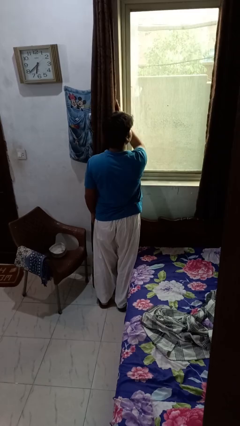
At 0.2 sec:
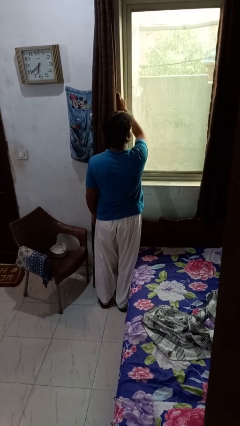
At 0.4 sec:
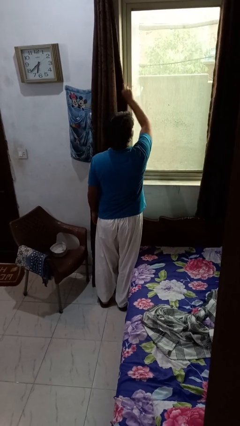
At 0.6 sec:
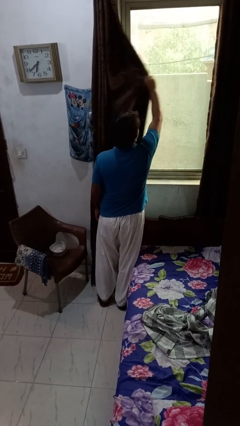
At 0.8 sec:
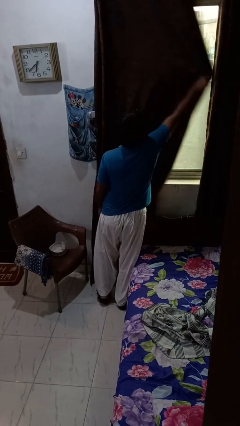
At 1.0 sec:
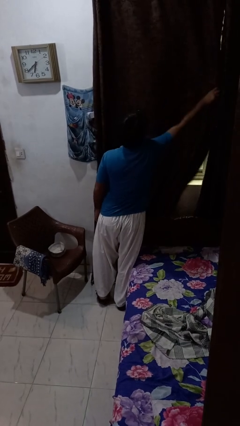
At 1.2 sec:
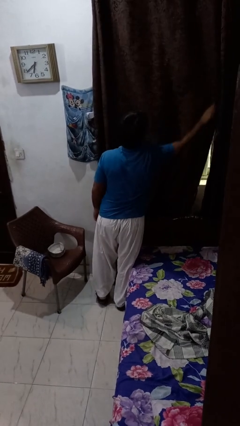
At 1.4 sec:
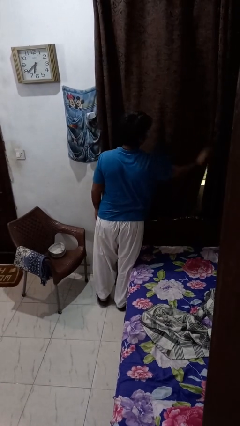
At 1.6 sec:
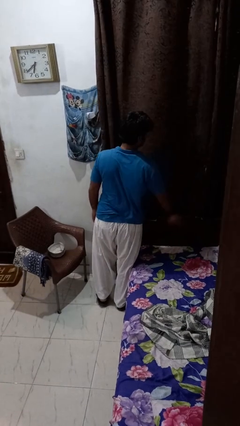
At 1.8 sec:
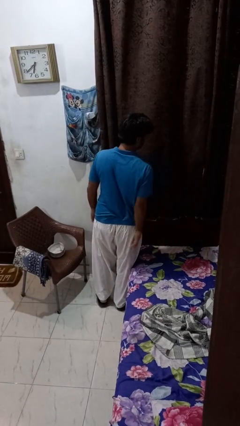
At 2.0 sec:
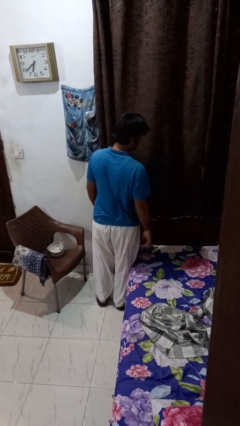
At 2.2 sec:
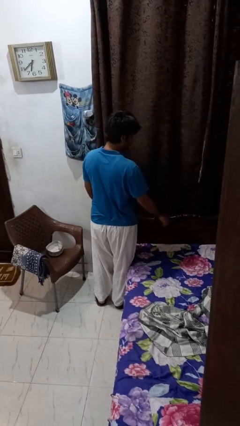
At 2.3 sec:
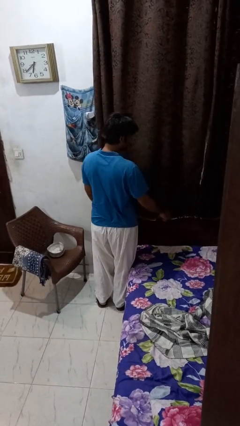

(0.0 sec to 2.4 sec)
person closes curtains

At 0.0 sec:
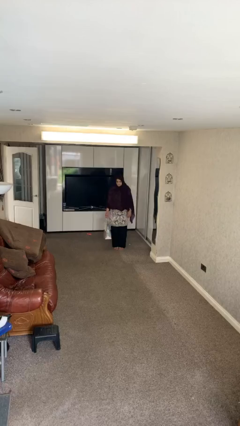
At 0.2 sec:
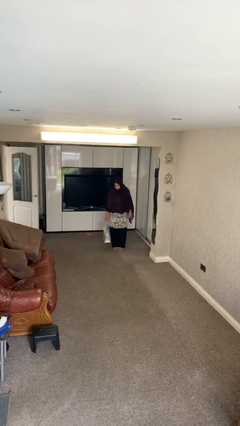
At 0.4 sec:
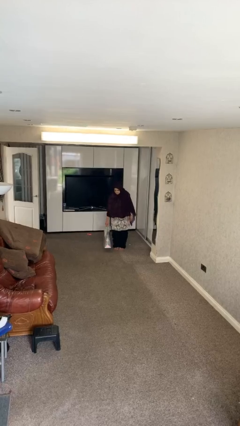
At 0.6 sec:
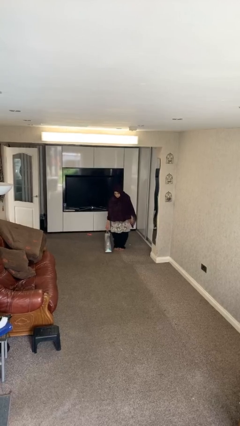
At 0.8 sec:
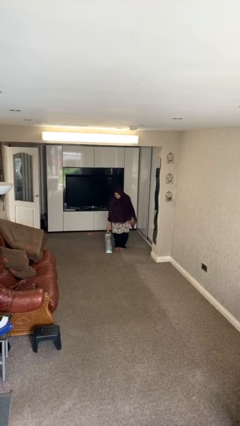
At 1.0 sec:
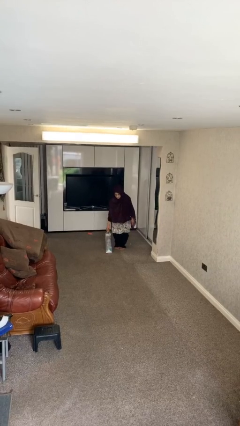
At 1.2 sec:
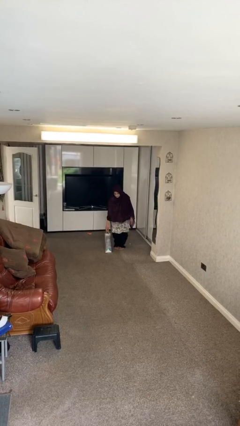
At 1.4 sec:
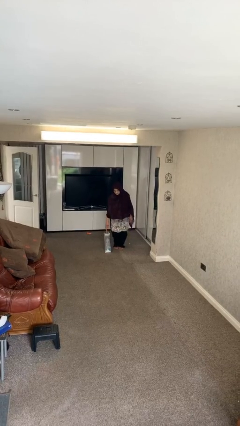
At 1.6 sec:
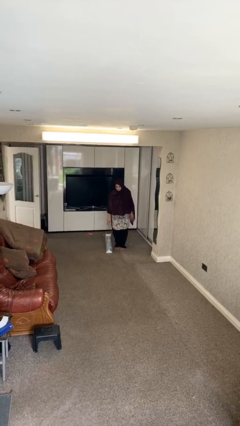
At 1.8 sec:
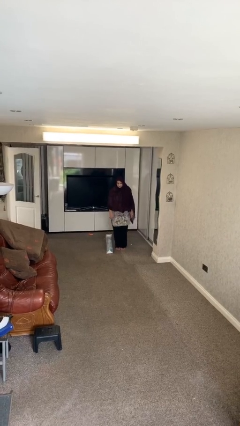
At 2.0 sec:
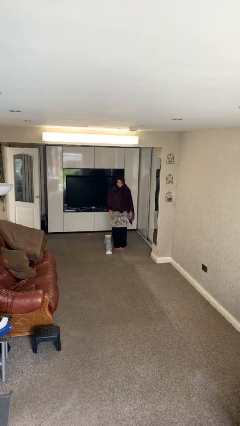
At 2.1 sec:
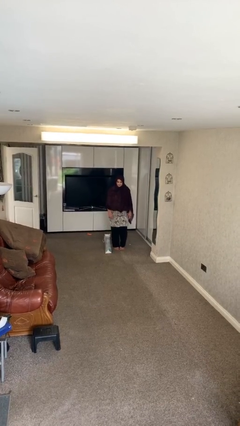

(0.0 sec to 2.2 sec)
person puts down object on floor

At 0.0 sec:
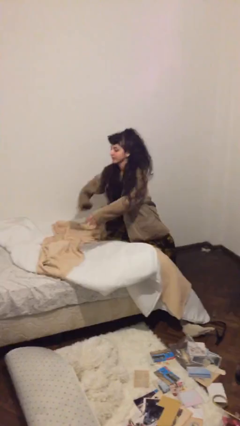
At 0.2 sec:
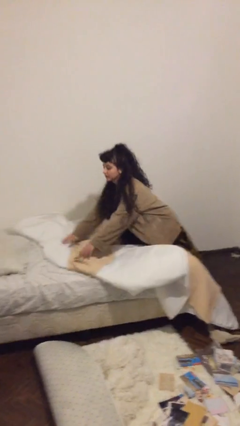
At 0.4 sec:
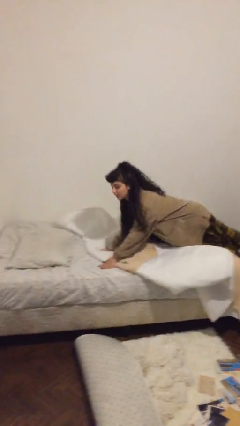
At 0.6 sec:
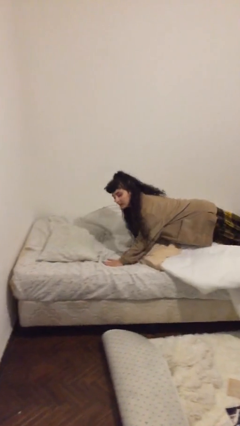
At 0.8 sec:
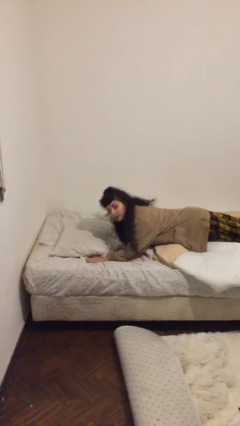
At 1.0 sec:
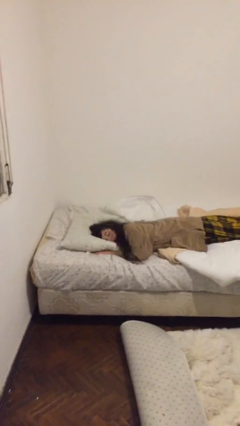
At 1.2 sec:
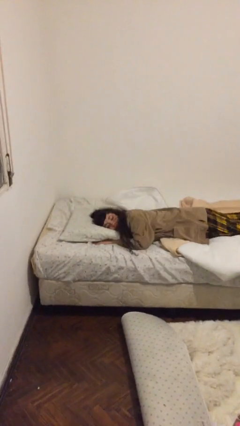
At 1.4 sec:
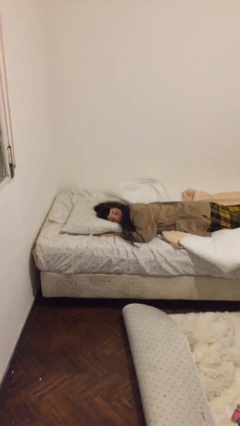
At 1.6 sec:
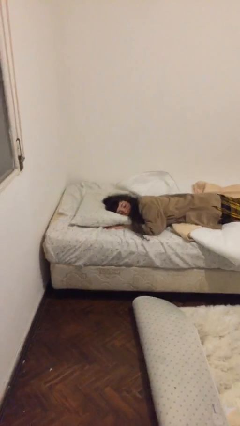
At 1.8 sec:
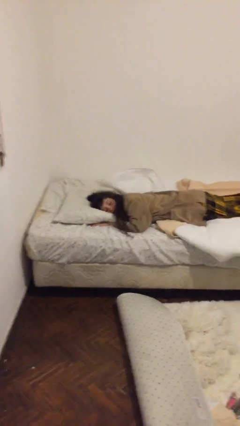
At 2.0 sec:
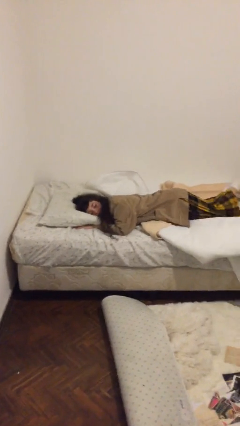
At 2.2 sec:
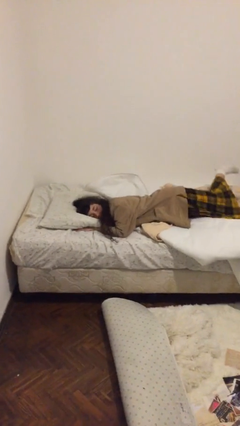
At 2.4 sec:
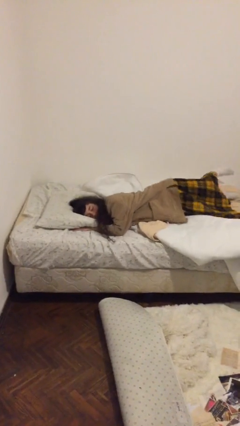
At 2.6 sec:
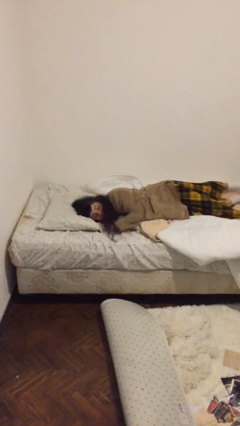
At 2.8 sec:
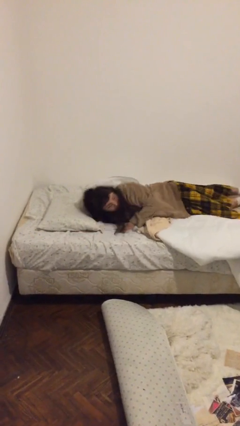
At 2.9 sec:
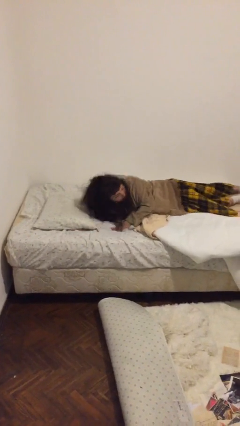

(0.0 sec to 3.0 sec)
person lies down on bed

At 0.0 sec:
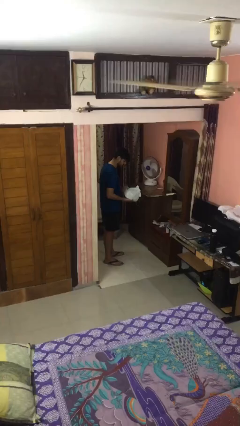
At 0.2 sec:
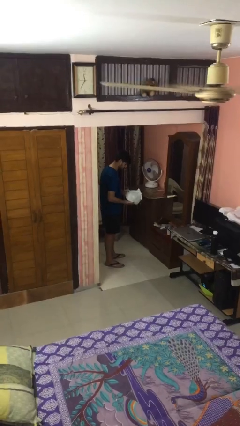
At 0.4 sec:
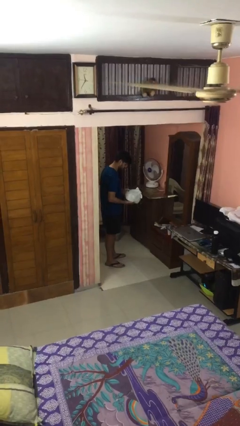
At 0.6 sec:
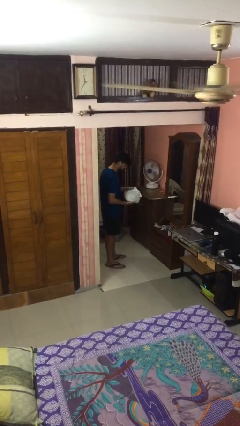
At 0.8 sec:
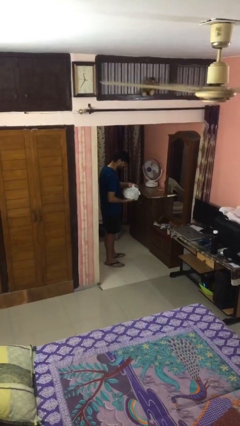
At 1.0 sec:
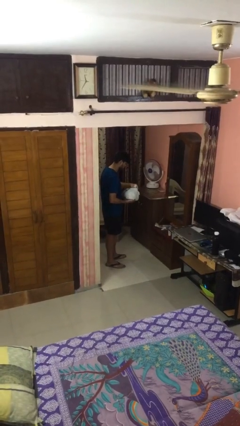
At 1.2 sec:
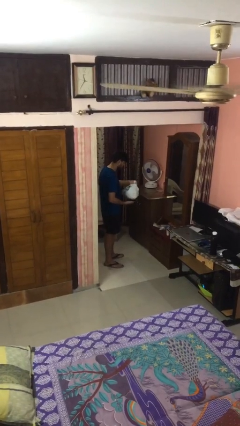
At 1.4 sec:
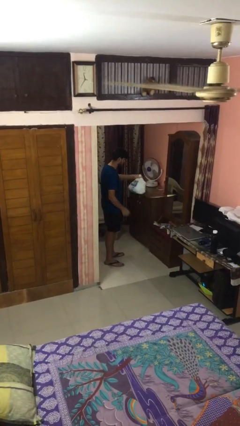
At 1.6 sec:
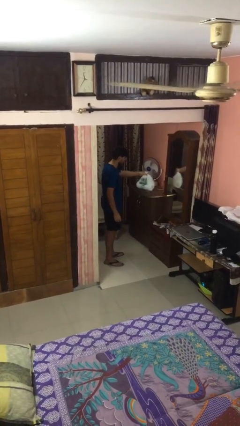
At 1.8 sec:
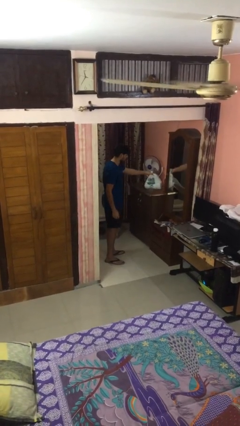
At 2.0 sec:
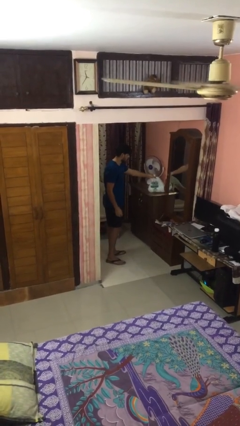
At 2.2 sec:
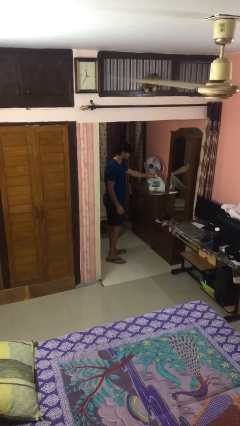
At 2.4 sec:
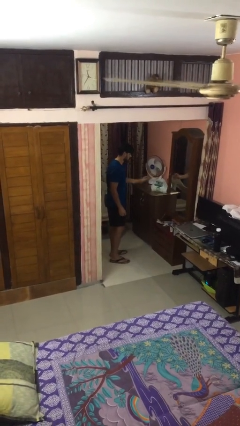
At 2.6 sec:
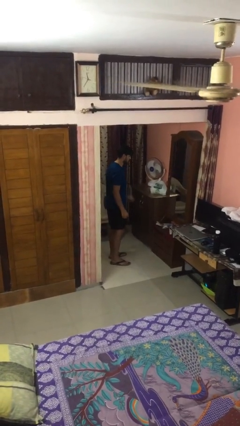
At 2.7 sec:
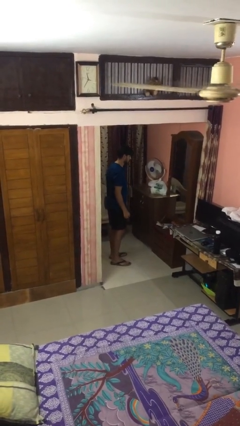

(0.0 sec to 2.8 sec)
person puts down object on countertop

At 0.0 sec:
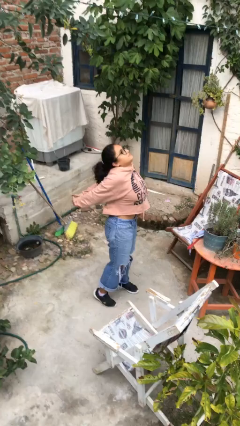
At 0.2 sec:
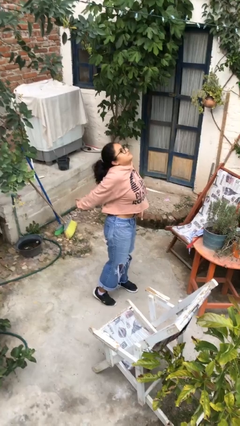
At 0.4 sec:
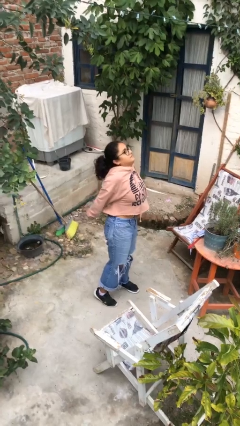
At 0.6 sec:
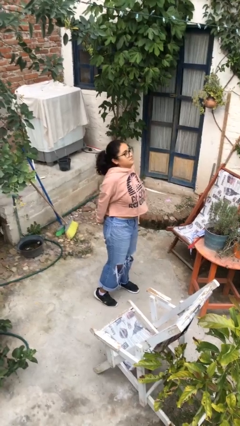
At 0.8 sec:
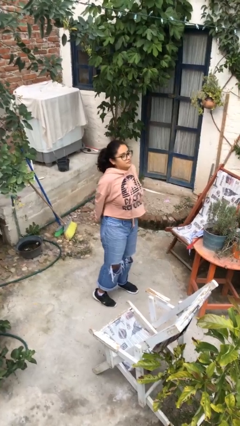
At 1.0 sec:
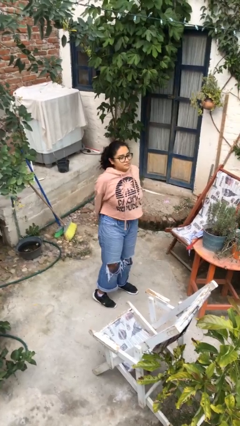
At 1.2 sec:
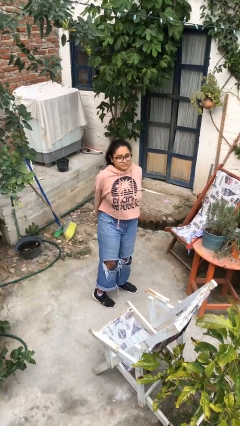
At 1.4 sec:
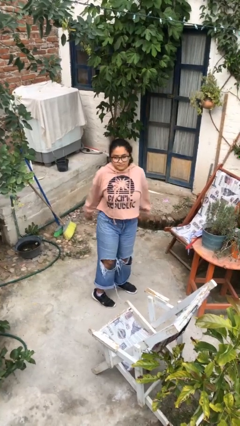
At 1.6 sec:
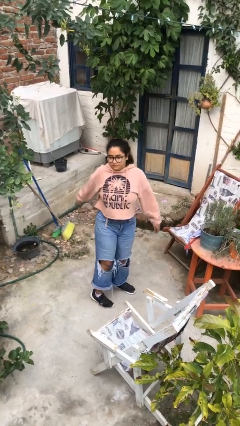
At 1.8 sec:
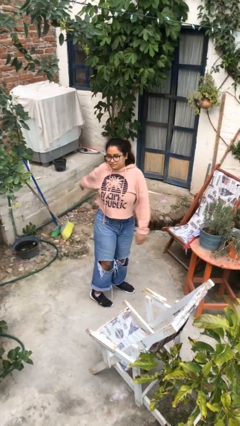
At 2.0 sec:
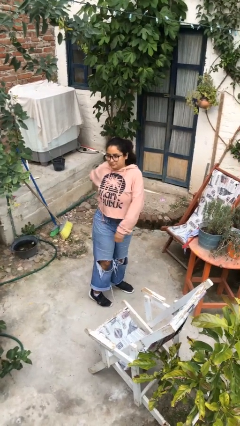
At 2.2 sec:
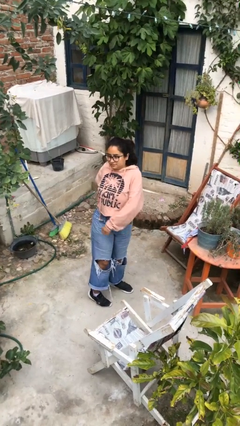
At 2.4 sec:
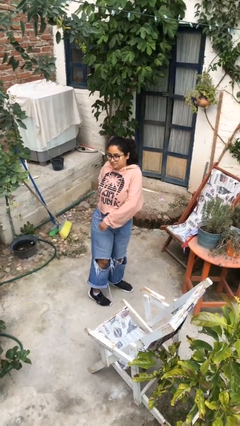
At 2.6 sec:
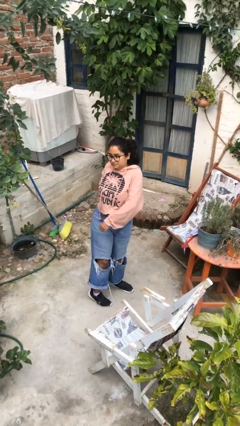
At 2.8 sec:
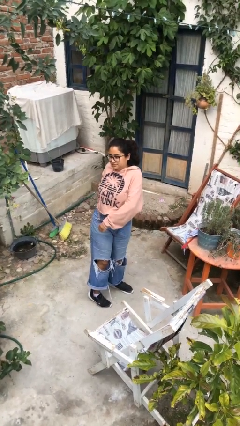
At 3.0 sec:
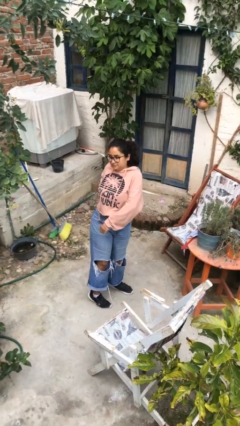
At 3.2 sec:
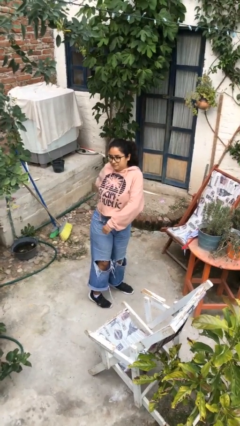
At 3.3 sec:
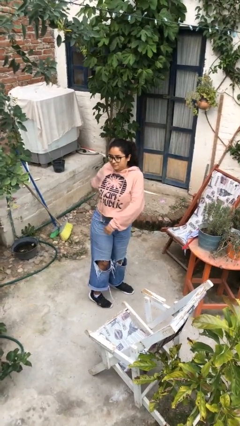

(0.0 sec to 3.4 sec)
person stretches arms to side

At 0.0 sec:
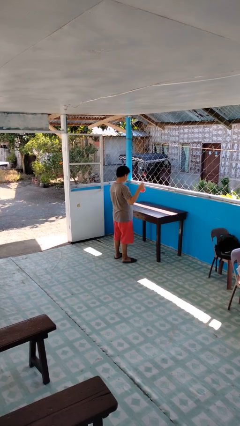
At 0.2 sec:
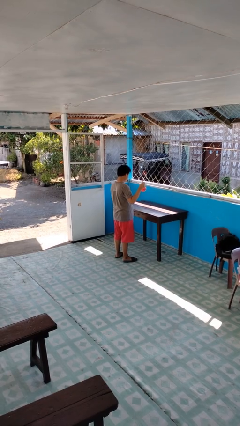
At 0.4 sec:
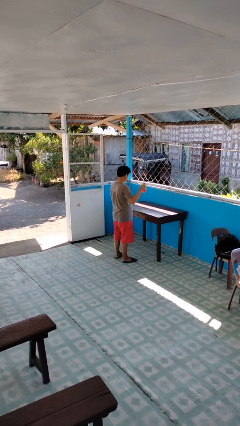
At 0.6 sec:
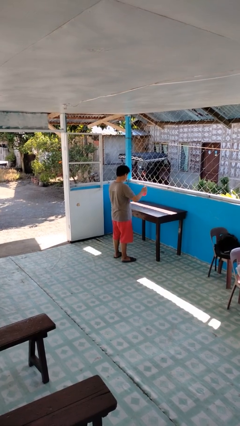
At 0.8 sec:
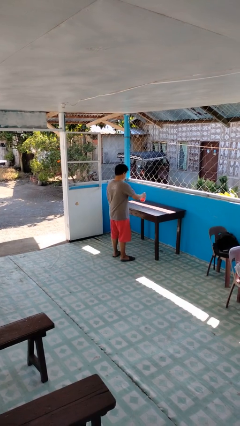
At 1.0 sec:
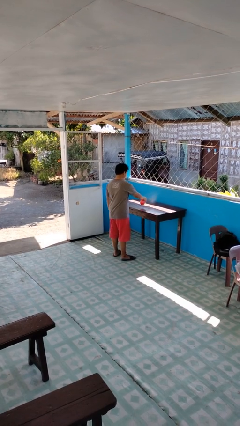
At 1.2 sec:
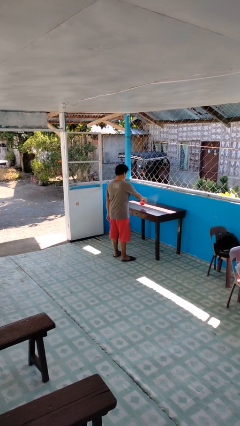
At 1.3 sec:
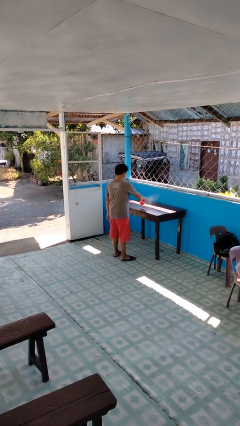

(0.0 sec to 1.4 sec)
person sprays from bottle

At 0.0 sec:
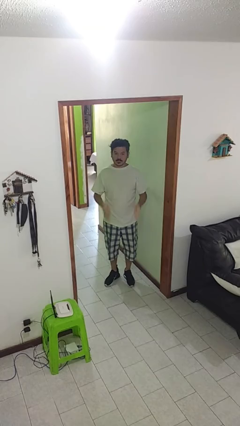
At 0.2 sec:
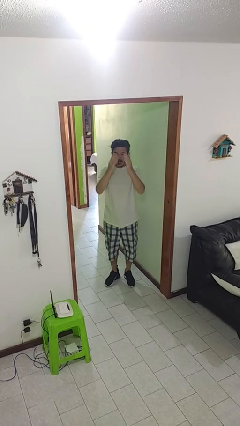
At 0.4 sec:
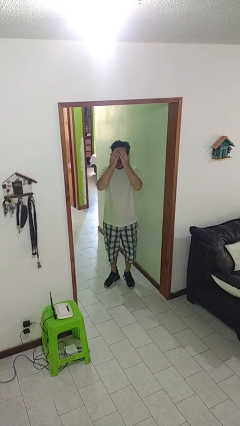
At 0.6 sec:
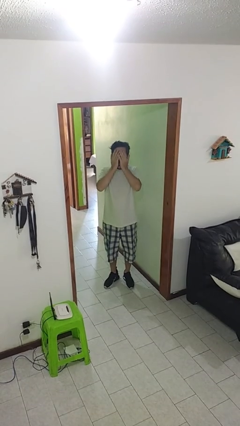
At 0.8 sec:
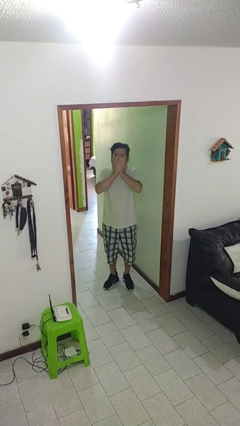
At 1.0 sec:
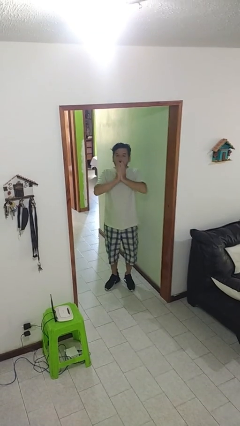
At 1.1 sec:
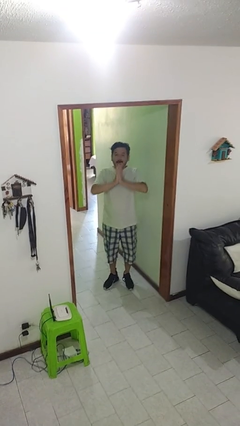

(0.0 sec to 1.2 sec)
person covers face with hands

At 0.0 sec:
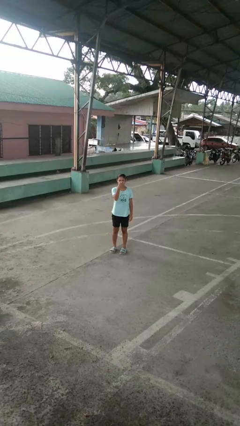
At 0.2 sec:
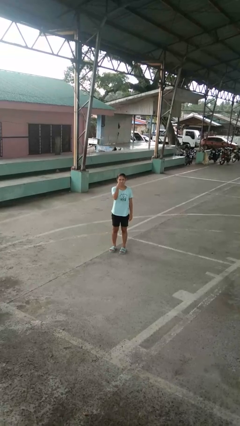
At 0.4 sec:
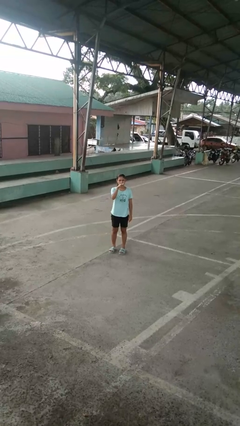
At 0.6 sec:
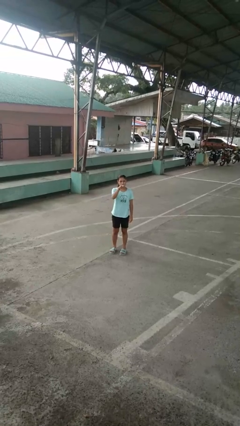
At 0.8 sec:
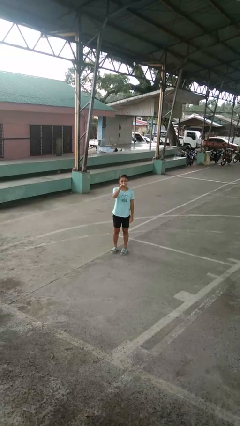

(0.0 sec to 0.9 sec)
person gestures watch closely
